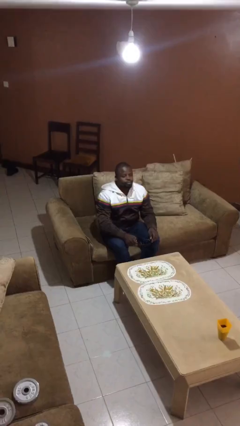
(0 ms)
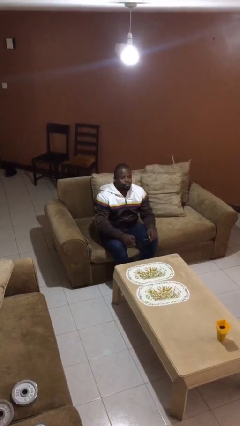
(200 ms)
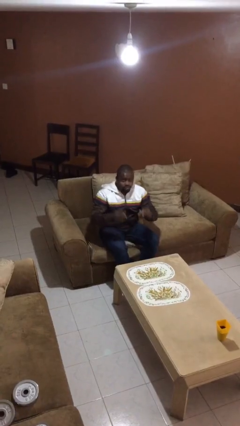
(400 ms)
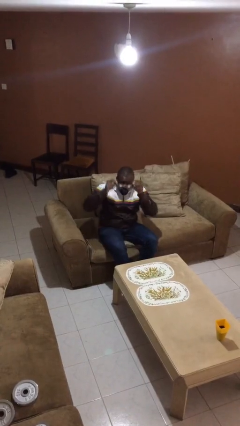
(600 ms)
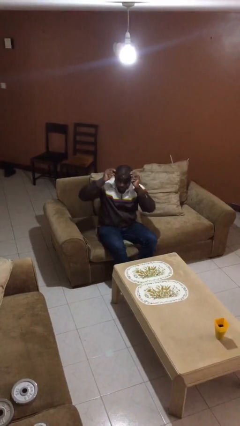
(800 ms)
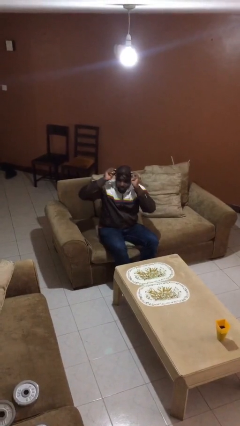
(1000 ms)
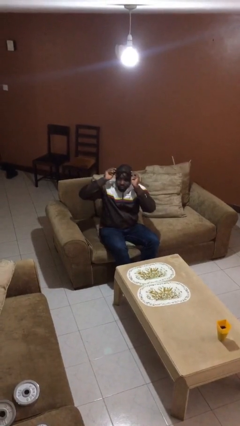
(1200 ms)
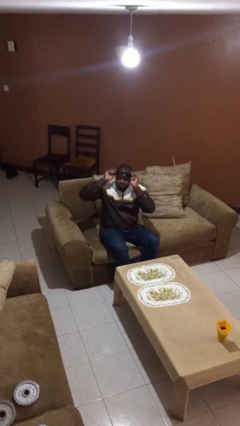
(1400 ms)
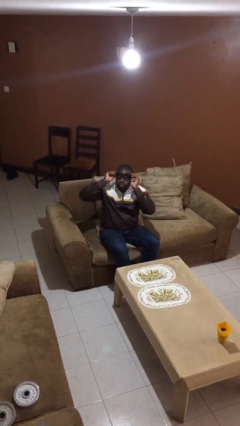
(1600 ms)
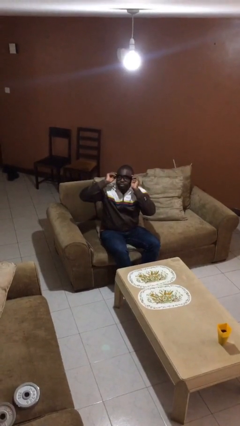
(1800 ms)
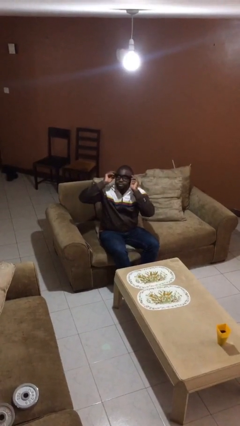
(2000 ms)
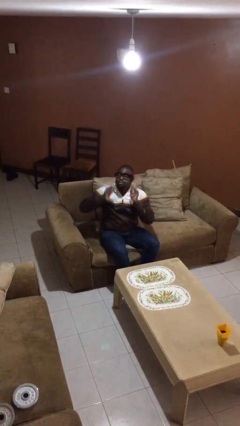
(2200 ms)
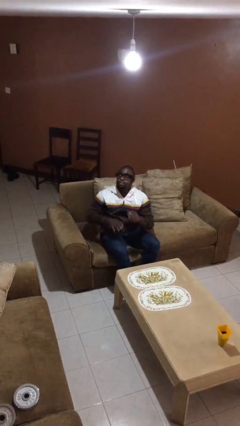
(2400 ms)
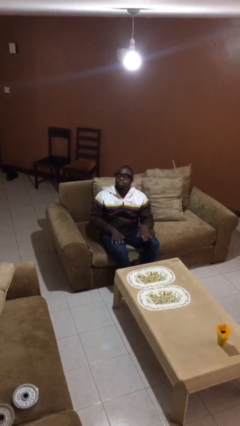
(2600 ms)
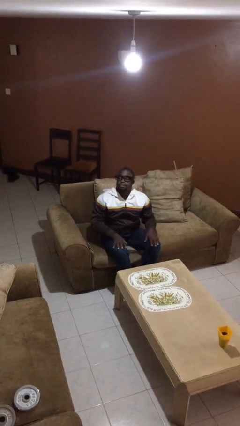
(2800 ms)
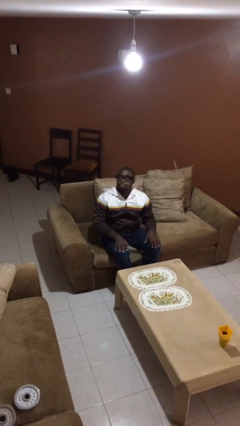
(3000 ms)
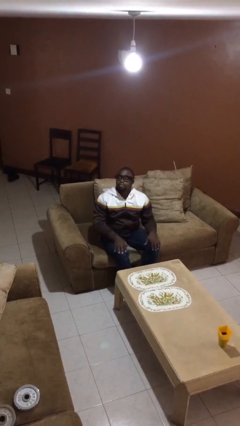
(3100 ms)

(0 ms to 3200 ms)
person puts on glasses

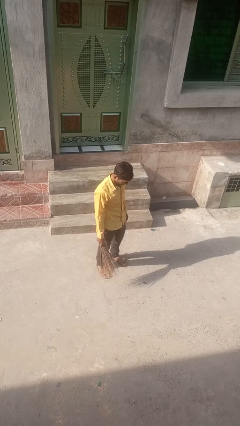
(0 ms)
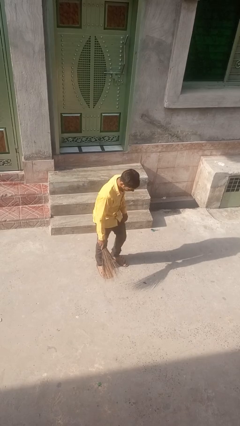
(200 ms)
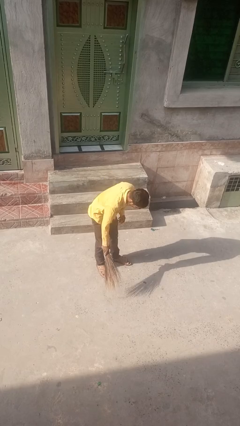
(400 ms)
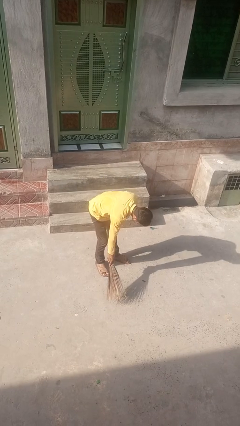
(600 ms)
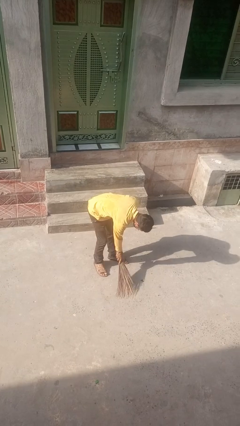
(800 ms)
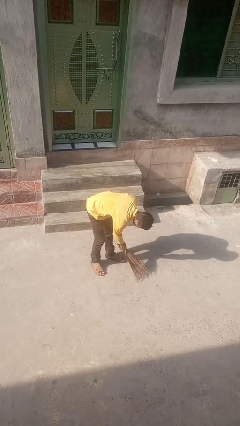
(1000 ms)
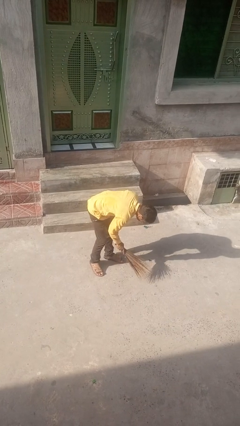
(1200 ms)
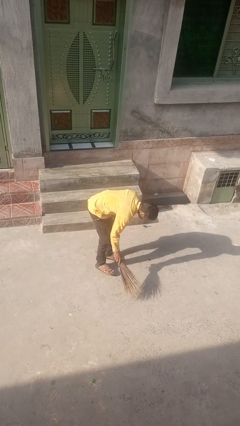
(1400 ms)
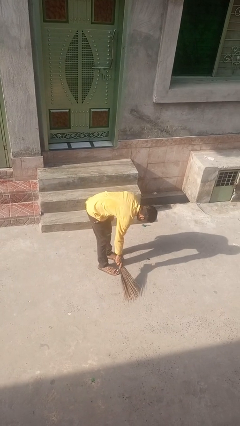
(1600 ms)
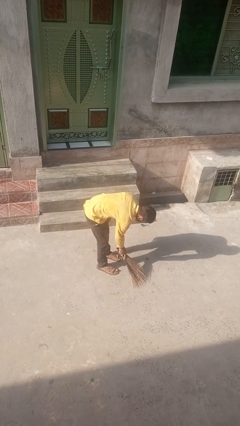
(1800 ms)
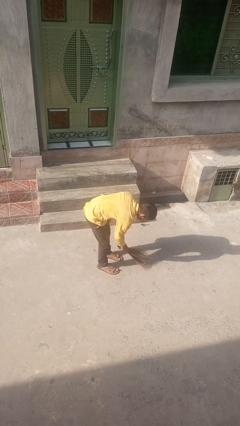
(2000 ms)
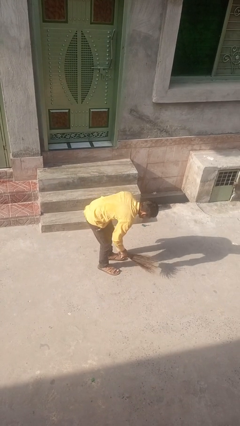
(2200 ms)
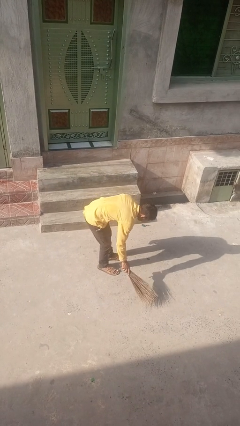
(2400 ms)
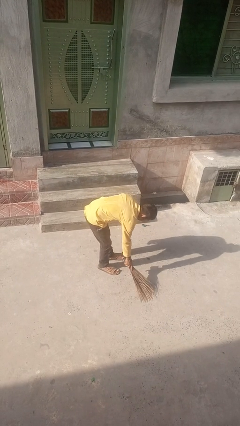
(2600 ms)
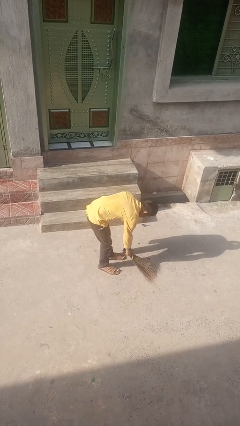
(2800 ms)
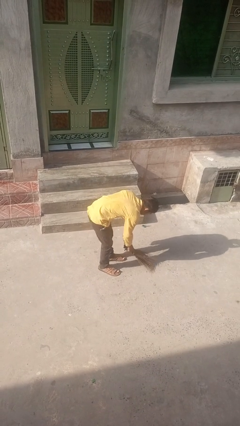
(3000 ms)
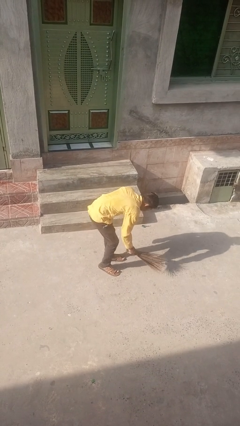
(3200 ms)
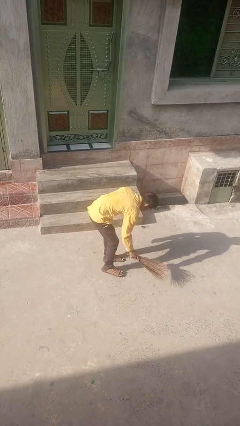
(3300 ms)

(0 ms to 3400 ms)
person sweeps floor

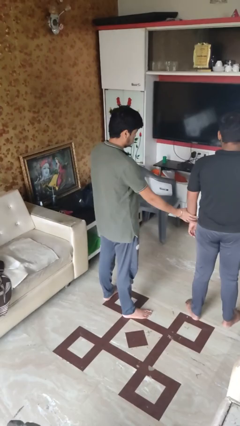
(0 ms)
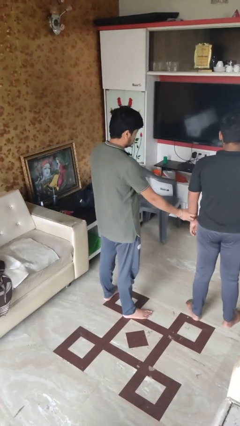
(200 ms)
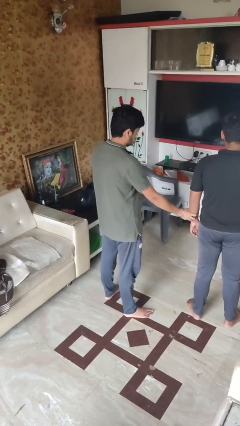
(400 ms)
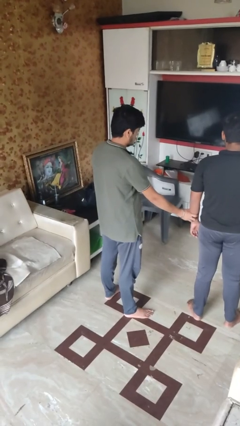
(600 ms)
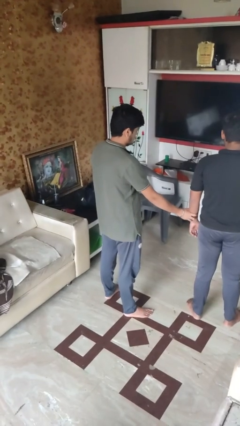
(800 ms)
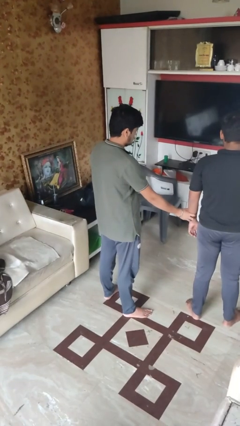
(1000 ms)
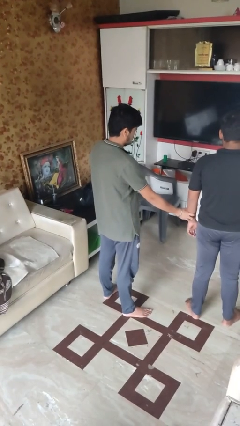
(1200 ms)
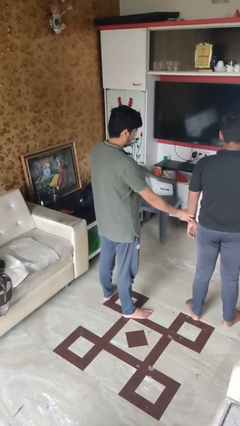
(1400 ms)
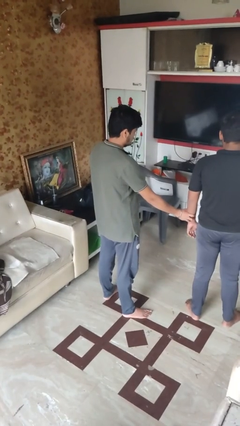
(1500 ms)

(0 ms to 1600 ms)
person grabs person by forearm

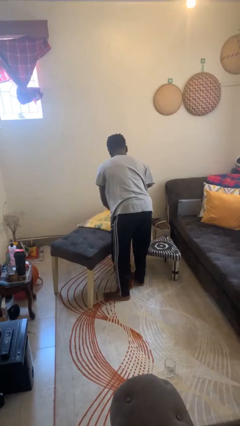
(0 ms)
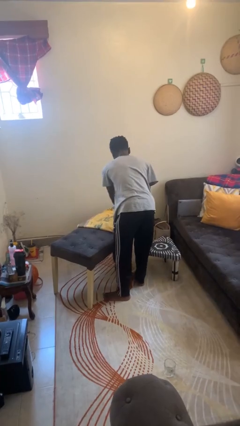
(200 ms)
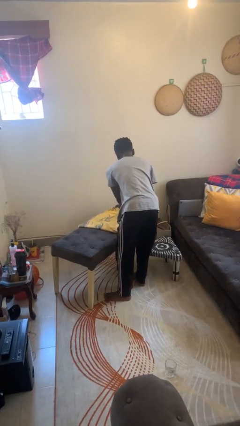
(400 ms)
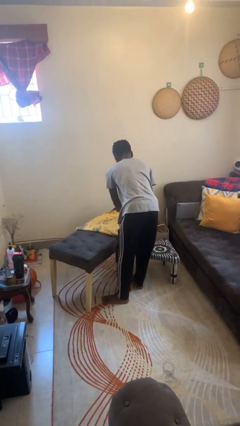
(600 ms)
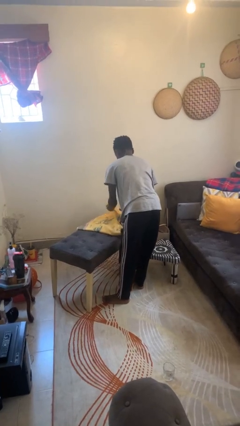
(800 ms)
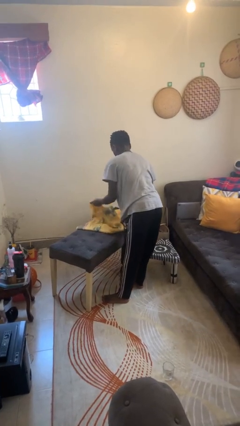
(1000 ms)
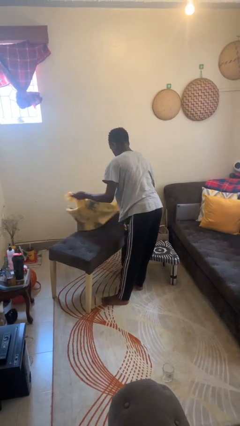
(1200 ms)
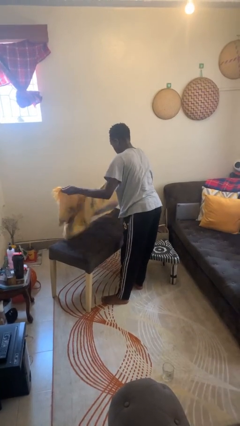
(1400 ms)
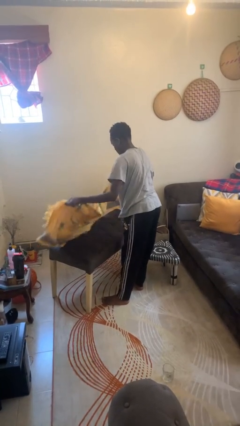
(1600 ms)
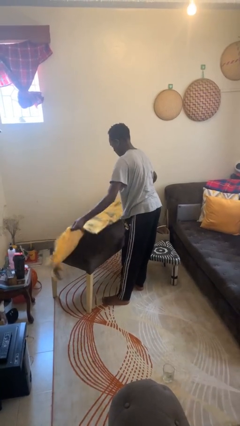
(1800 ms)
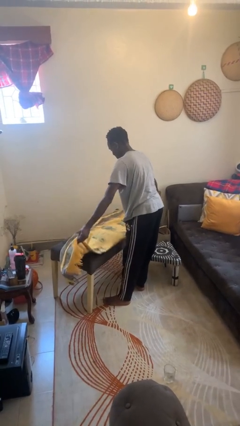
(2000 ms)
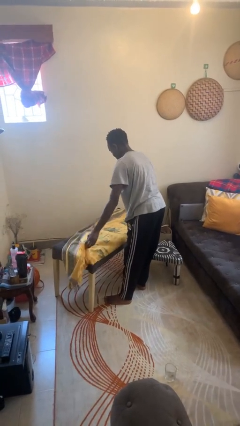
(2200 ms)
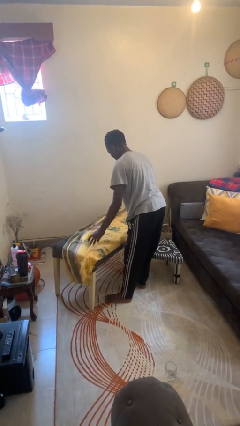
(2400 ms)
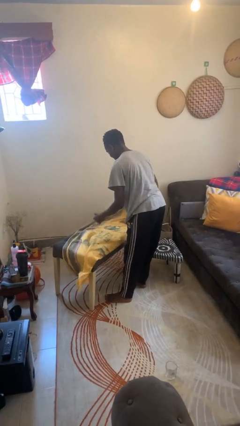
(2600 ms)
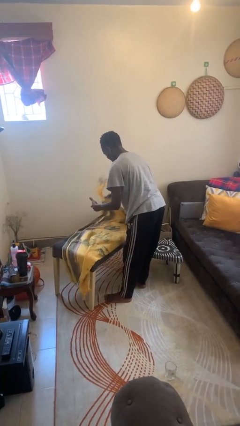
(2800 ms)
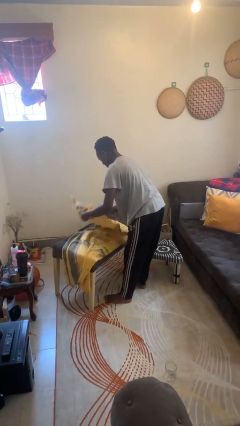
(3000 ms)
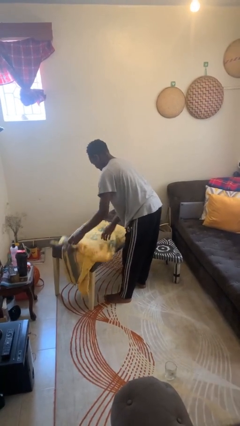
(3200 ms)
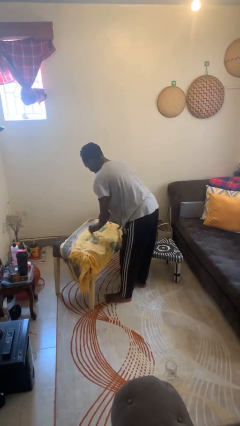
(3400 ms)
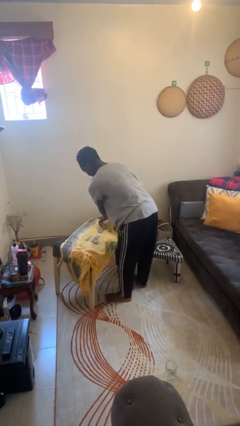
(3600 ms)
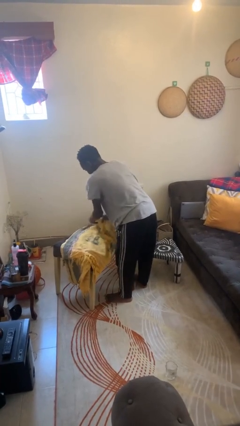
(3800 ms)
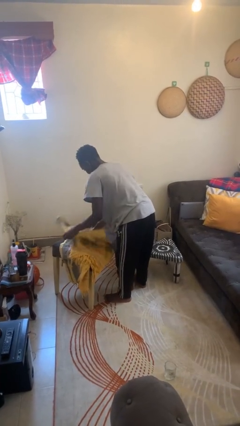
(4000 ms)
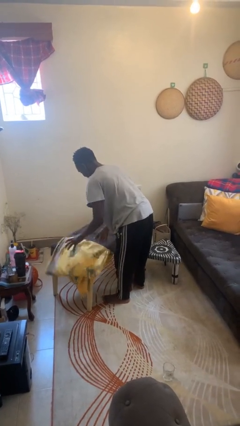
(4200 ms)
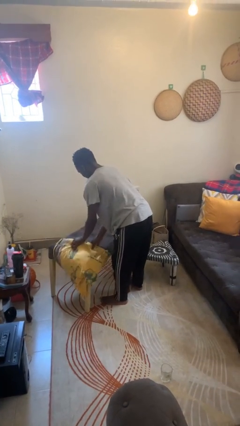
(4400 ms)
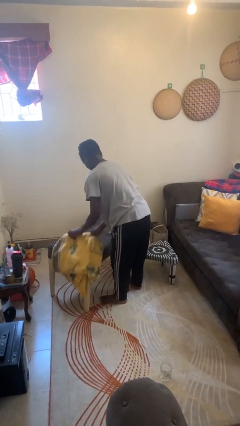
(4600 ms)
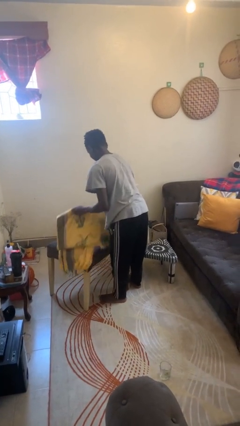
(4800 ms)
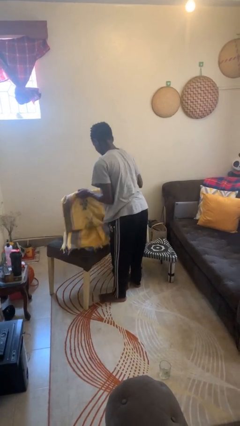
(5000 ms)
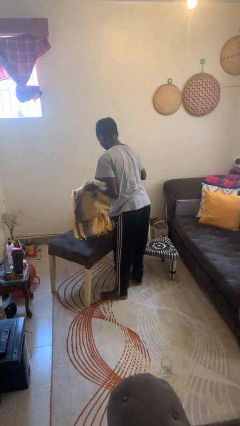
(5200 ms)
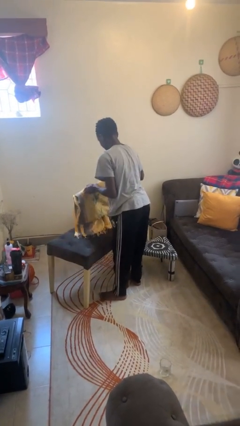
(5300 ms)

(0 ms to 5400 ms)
person folds tablecloth

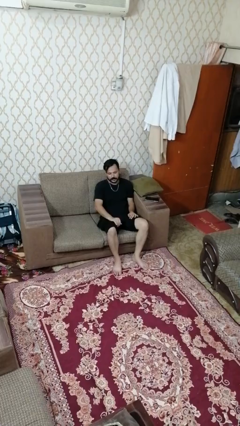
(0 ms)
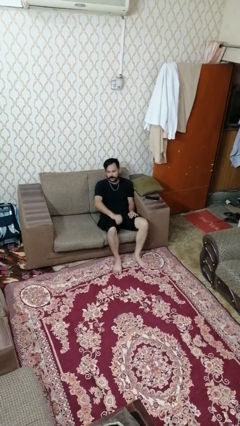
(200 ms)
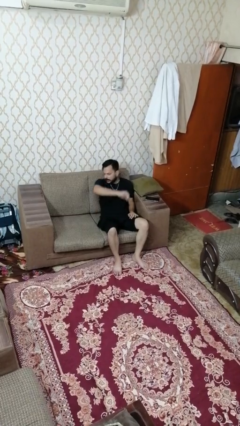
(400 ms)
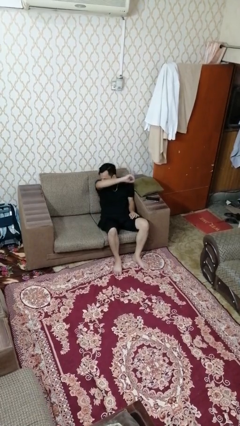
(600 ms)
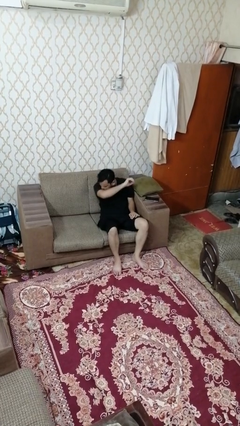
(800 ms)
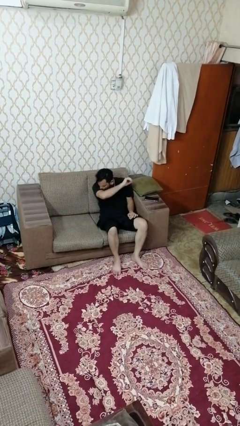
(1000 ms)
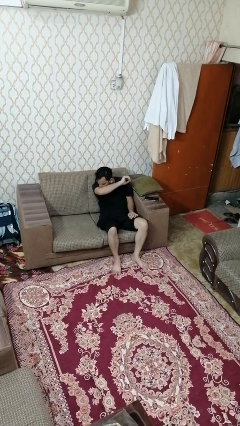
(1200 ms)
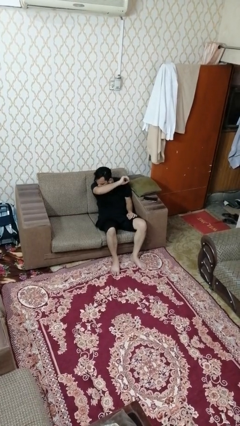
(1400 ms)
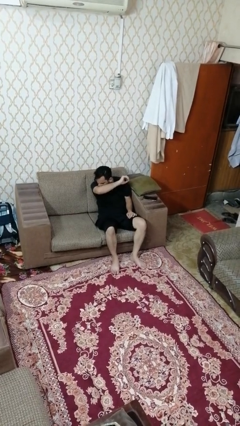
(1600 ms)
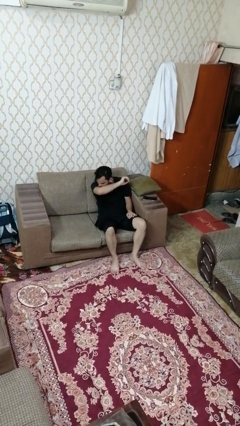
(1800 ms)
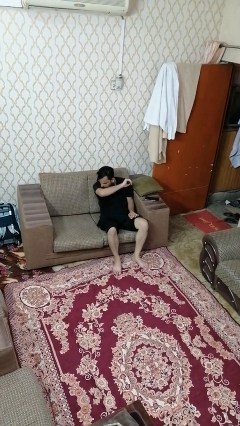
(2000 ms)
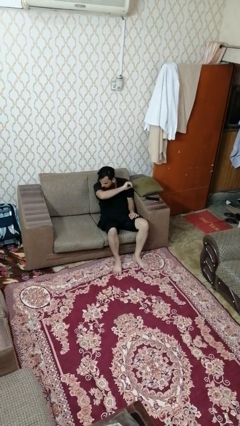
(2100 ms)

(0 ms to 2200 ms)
person sneezes into arm

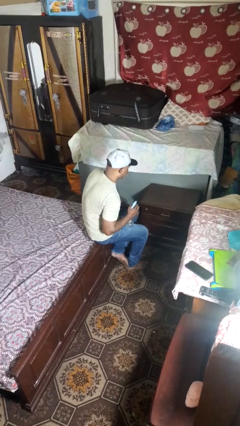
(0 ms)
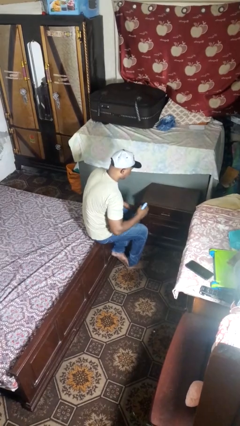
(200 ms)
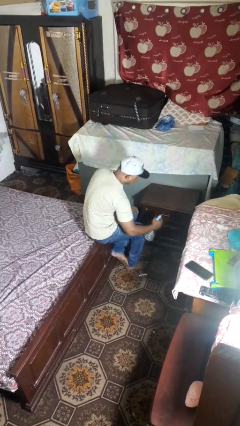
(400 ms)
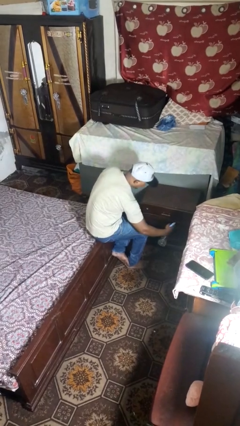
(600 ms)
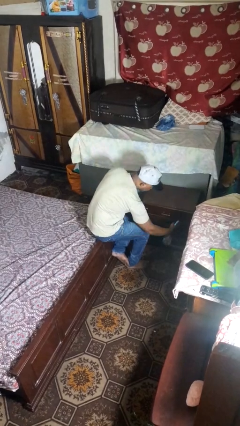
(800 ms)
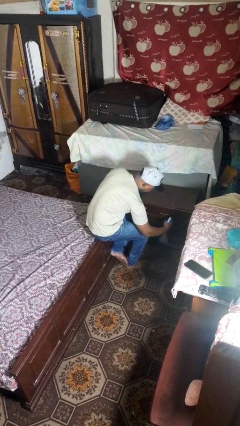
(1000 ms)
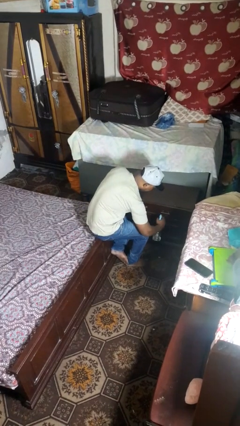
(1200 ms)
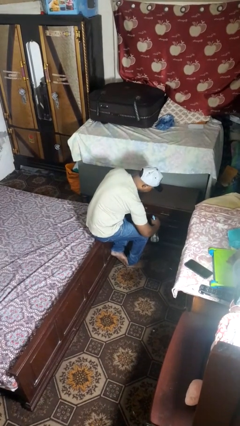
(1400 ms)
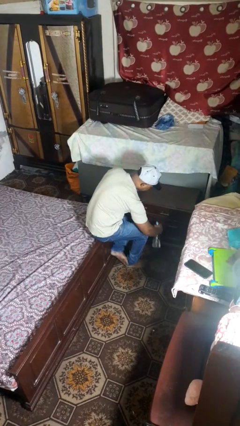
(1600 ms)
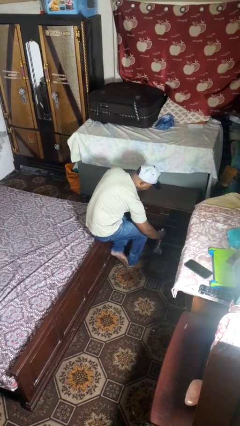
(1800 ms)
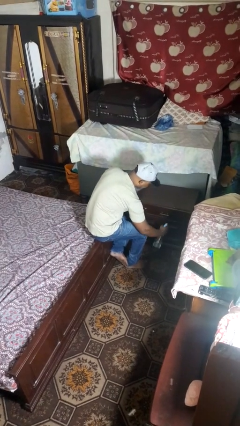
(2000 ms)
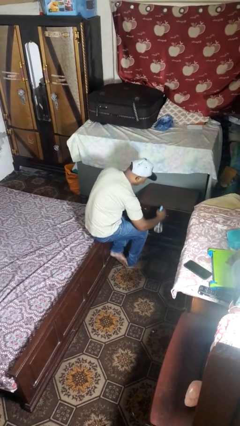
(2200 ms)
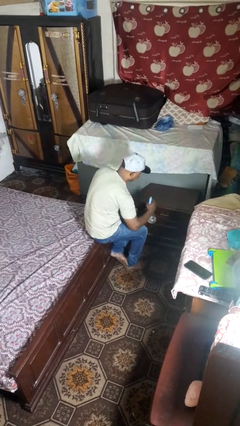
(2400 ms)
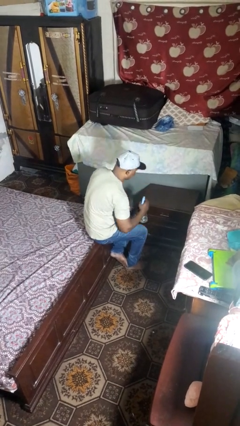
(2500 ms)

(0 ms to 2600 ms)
person sprays from bottle
